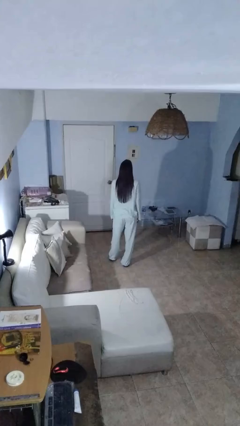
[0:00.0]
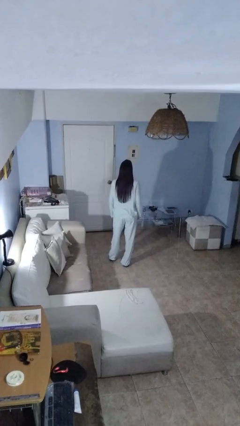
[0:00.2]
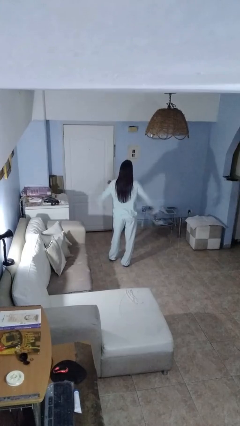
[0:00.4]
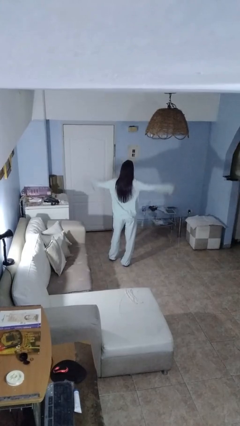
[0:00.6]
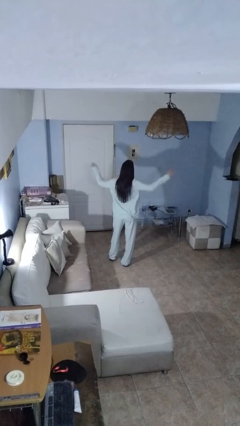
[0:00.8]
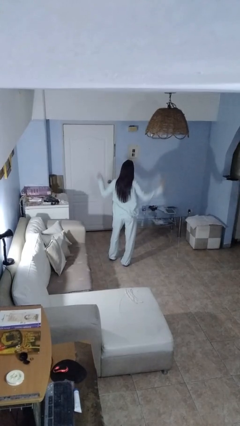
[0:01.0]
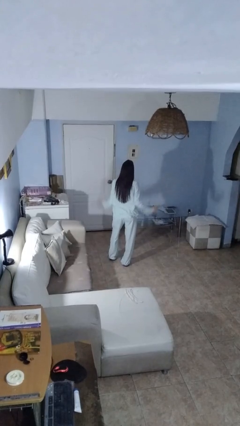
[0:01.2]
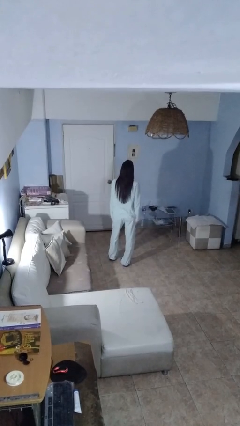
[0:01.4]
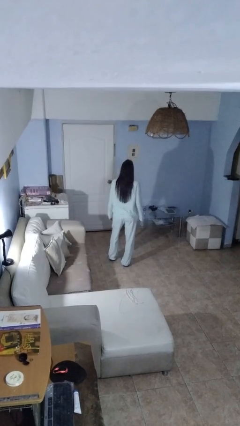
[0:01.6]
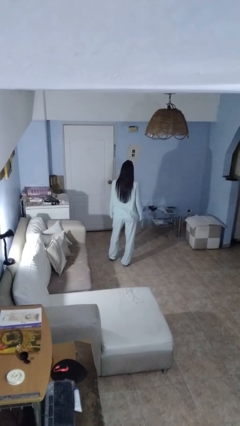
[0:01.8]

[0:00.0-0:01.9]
person slaps hands on thighs

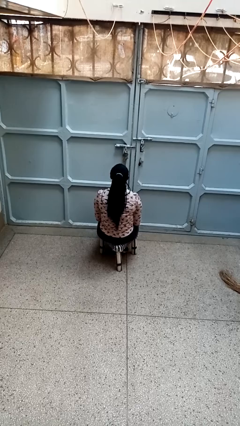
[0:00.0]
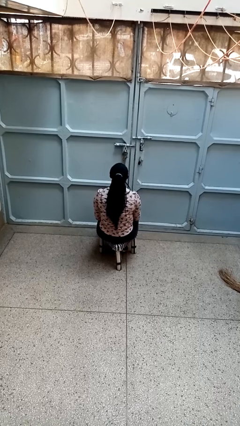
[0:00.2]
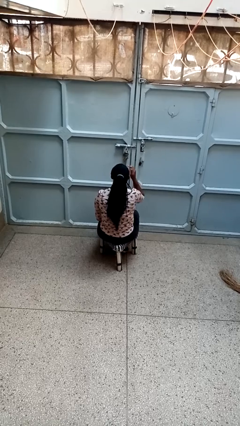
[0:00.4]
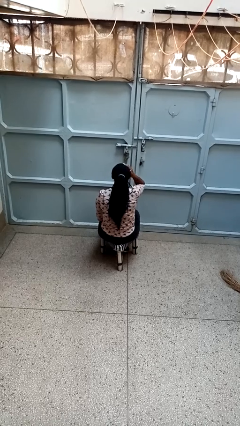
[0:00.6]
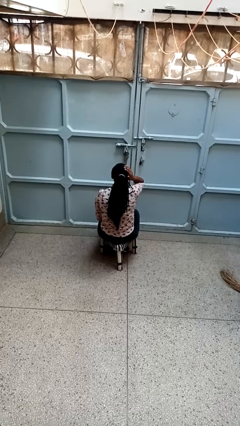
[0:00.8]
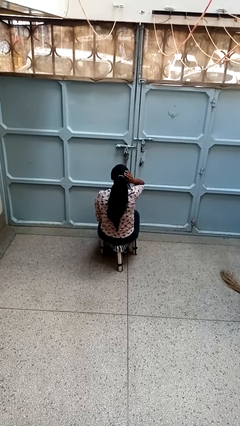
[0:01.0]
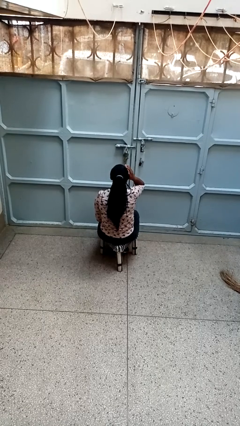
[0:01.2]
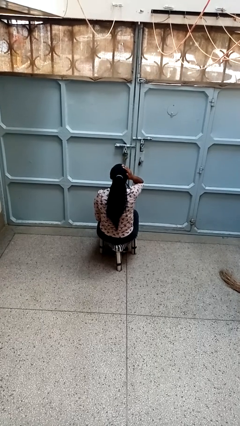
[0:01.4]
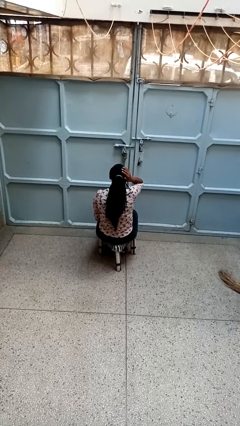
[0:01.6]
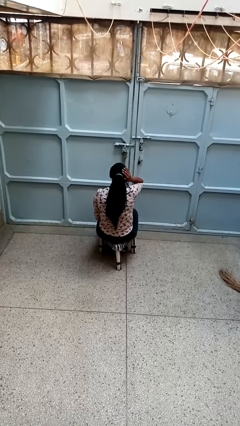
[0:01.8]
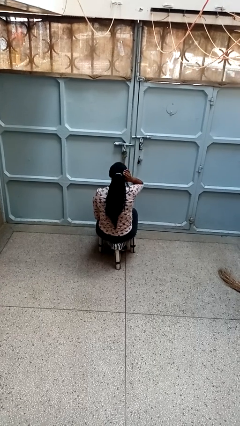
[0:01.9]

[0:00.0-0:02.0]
person strokes hair

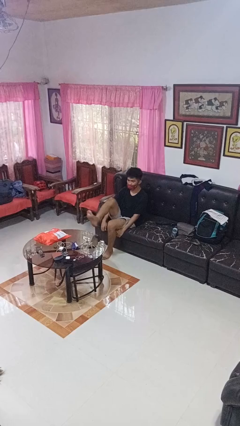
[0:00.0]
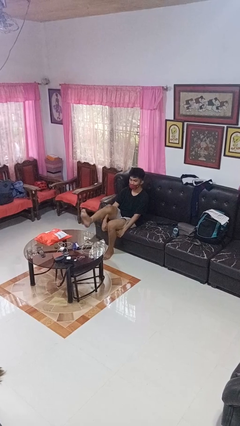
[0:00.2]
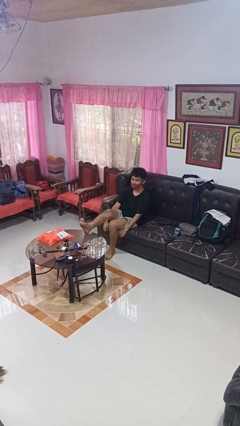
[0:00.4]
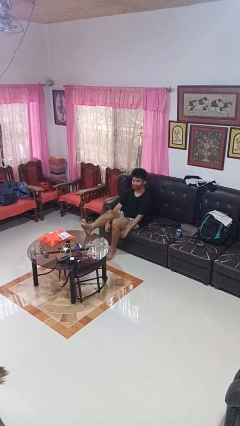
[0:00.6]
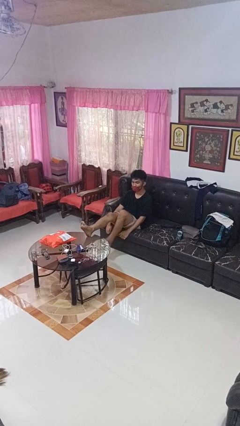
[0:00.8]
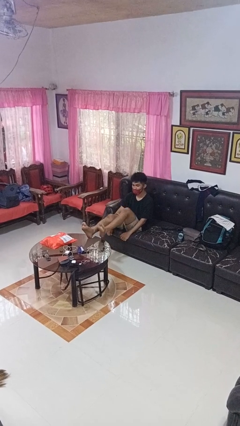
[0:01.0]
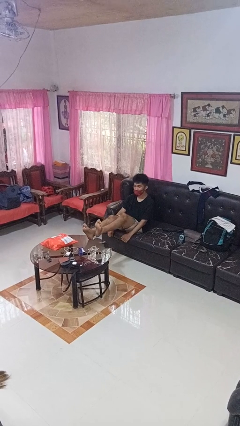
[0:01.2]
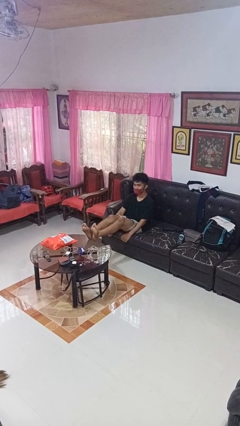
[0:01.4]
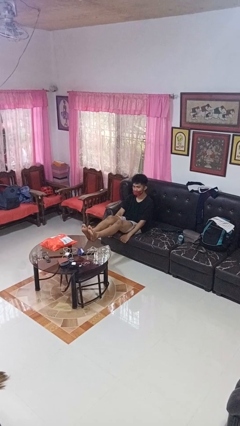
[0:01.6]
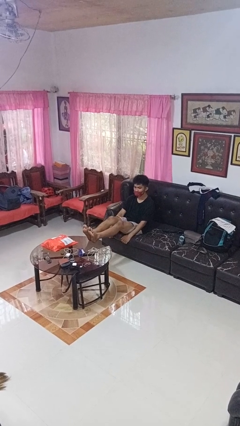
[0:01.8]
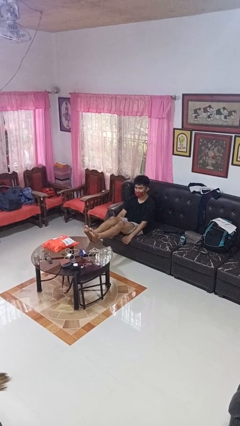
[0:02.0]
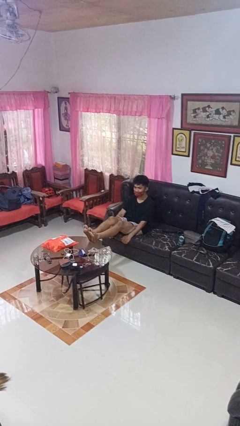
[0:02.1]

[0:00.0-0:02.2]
person puts feet up

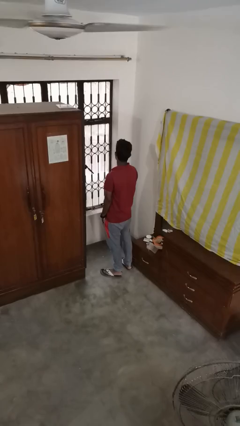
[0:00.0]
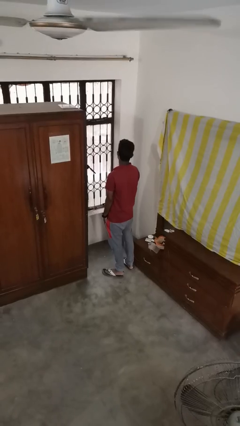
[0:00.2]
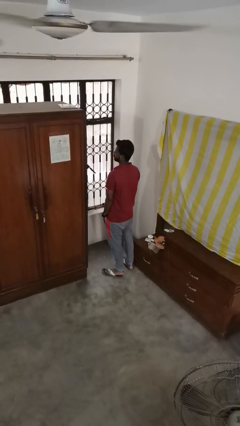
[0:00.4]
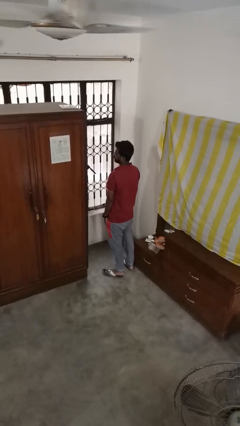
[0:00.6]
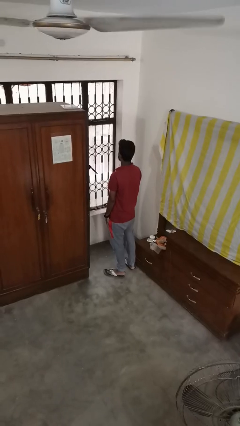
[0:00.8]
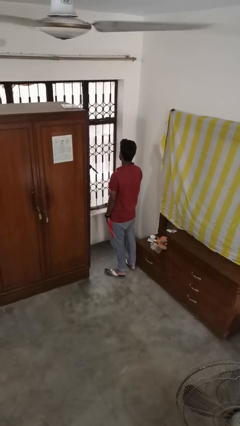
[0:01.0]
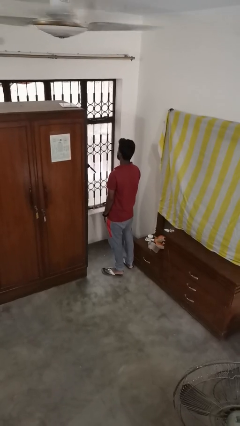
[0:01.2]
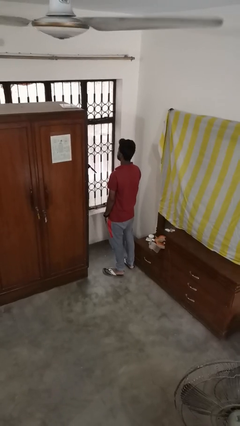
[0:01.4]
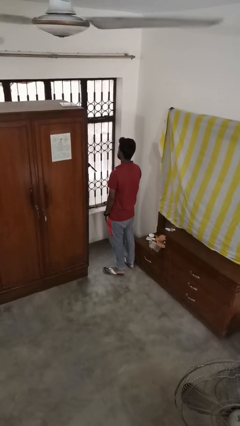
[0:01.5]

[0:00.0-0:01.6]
person shakes head

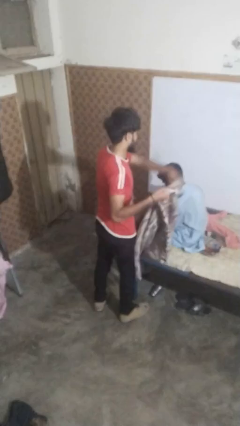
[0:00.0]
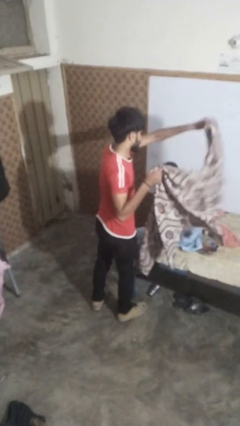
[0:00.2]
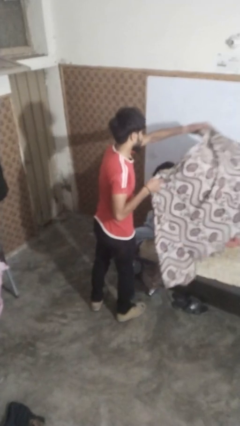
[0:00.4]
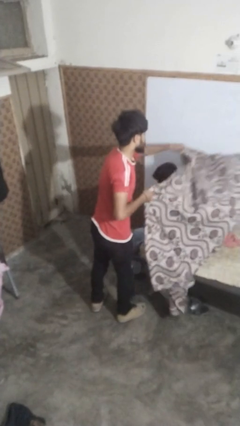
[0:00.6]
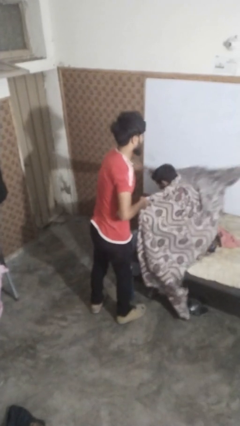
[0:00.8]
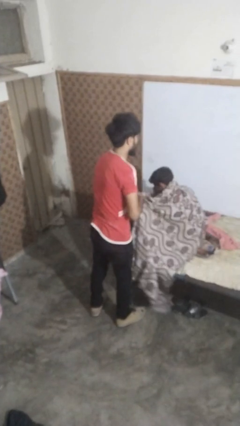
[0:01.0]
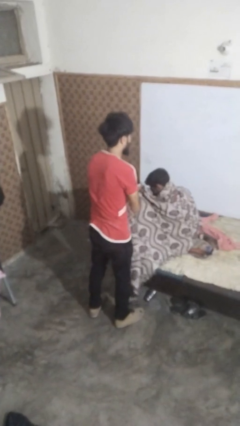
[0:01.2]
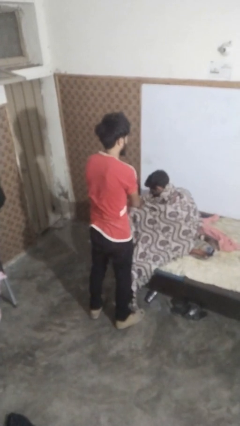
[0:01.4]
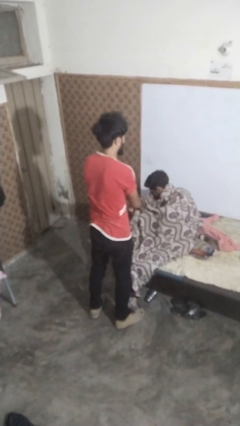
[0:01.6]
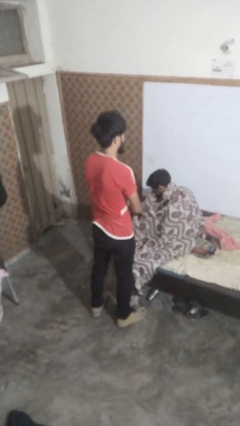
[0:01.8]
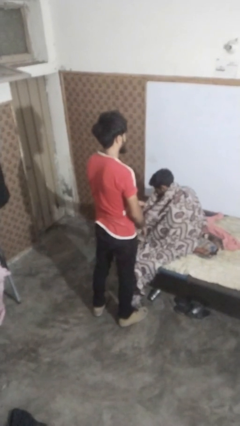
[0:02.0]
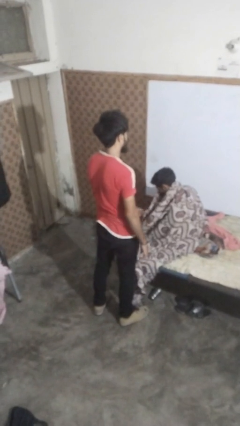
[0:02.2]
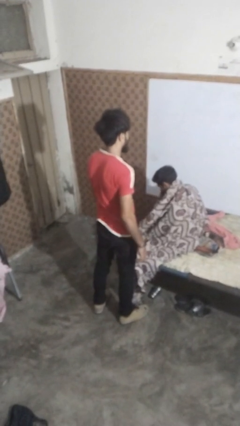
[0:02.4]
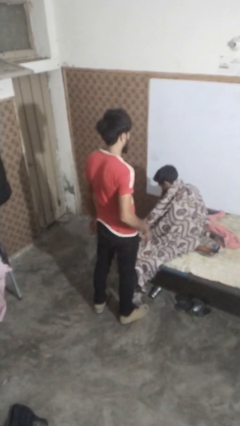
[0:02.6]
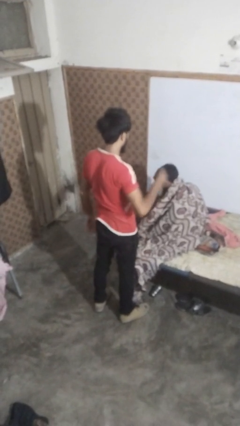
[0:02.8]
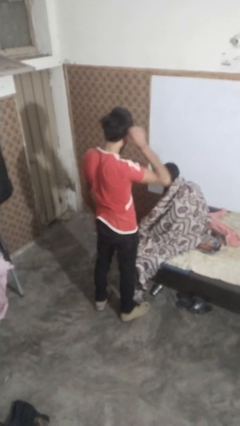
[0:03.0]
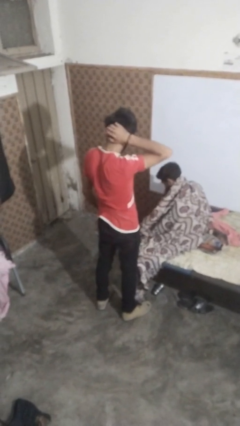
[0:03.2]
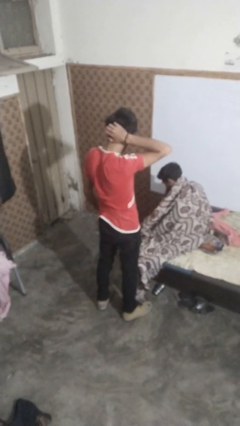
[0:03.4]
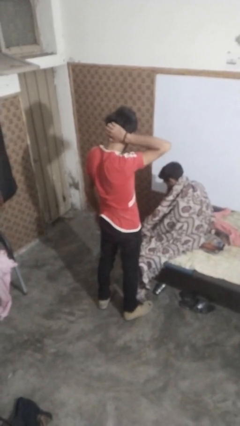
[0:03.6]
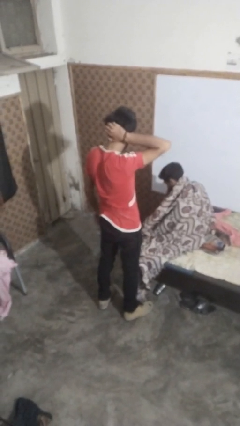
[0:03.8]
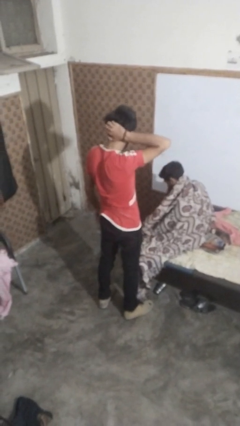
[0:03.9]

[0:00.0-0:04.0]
person covers friend with blanket

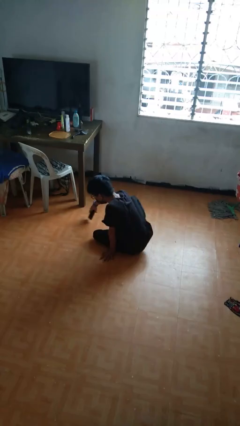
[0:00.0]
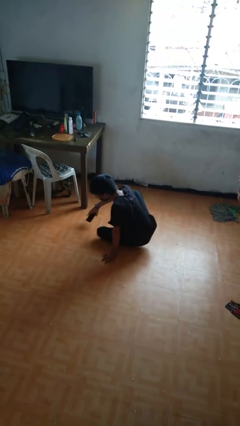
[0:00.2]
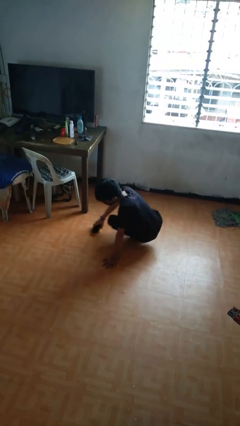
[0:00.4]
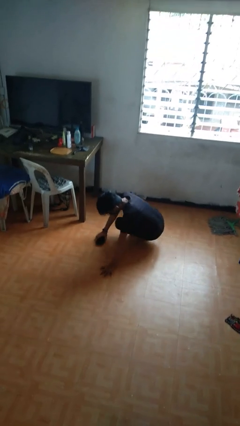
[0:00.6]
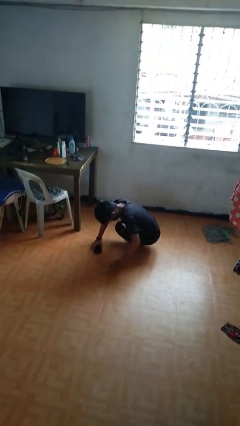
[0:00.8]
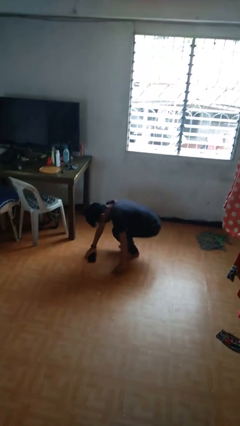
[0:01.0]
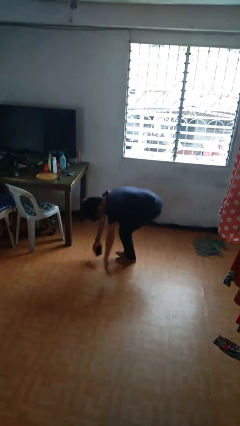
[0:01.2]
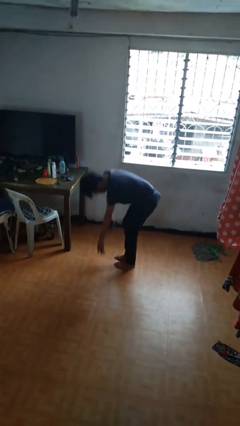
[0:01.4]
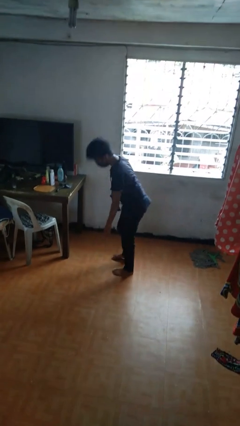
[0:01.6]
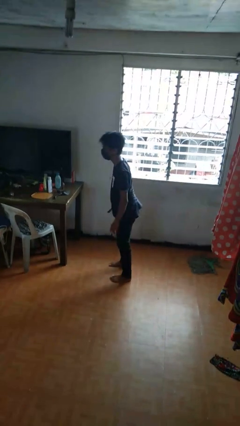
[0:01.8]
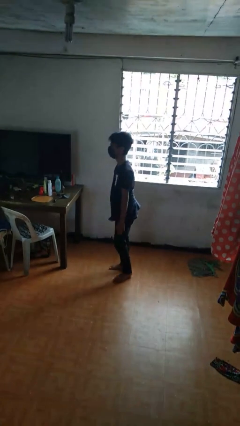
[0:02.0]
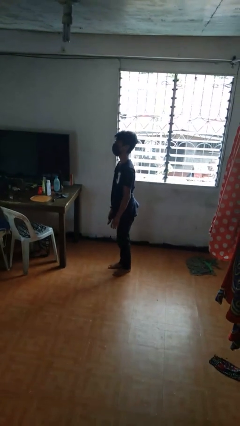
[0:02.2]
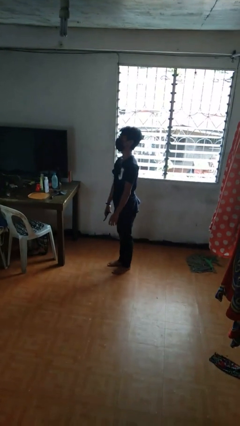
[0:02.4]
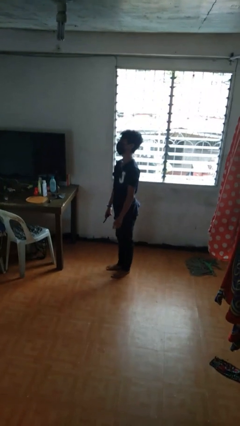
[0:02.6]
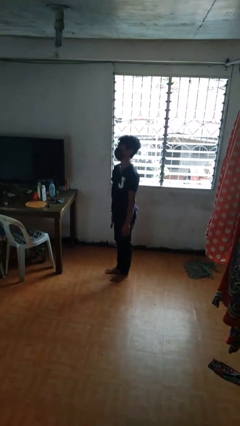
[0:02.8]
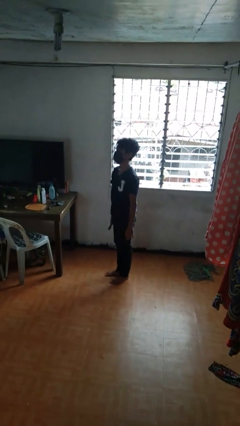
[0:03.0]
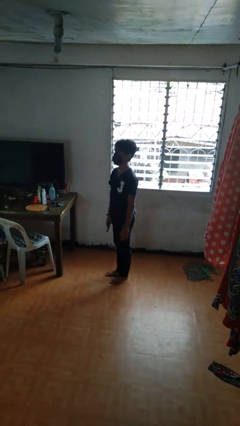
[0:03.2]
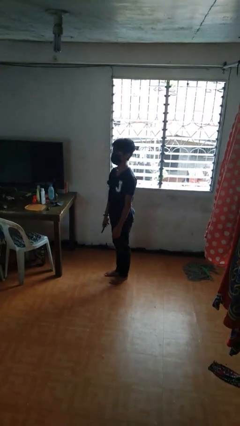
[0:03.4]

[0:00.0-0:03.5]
person stands up from floor

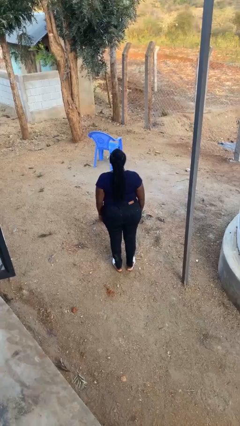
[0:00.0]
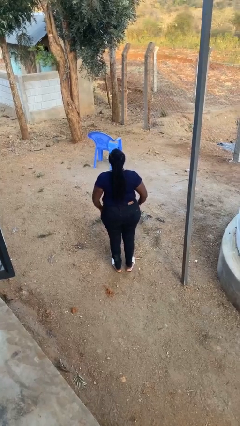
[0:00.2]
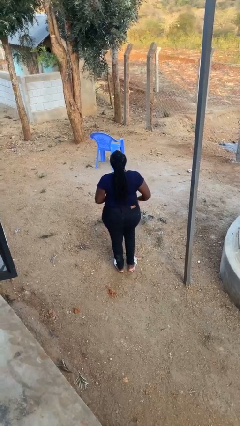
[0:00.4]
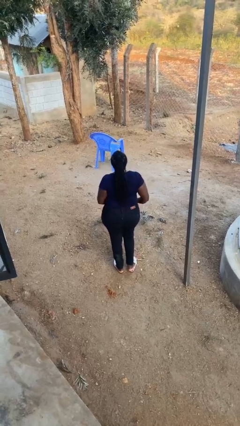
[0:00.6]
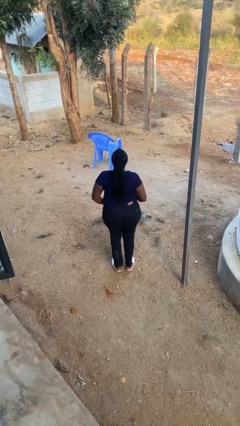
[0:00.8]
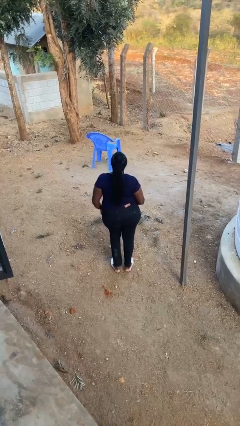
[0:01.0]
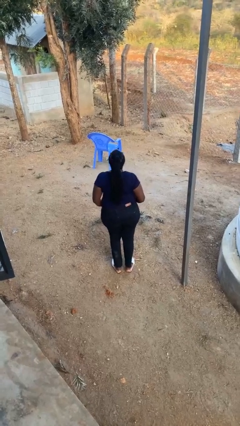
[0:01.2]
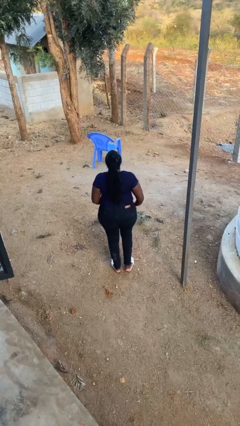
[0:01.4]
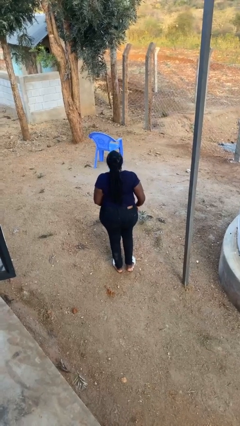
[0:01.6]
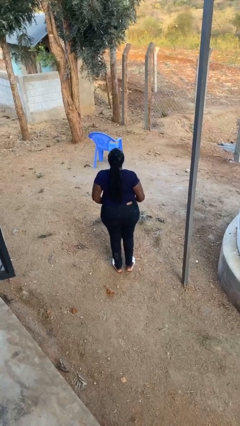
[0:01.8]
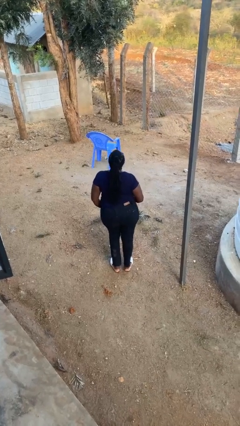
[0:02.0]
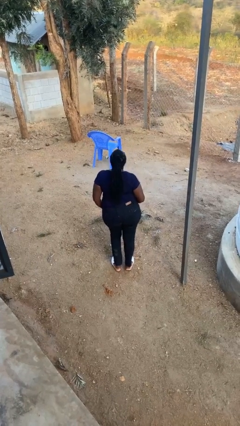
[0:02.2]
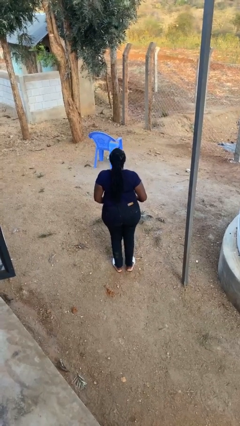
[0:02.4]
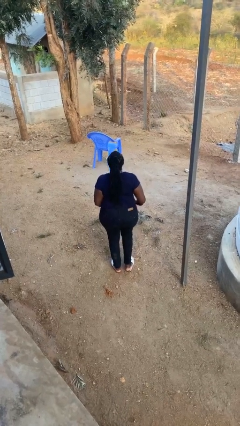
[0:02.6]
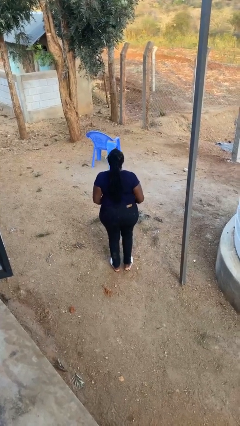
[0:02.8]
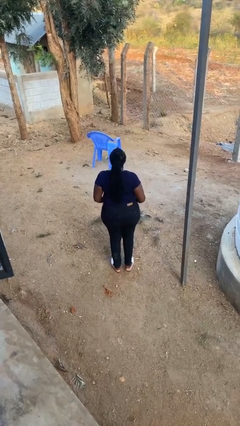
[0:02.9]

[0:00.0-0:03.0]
person wiggles hips
